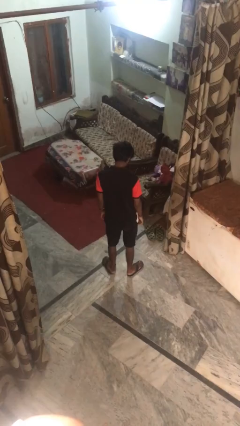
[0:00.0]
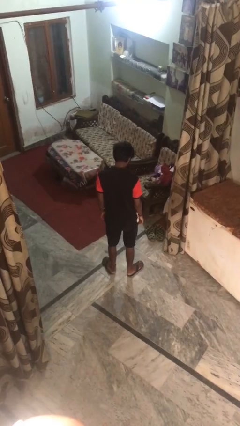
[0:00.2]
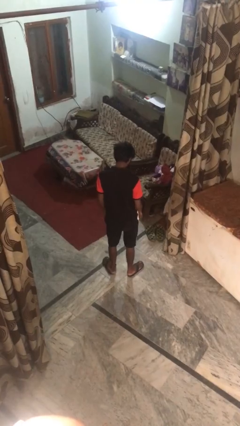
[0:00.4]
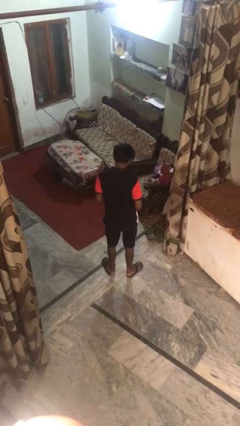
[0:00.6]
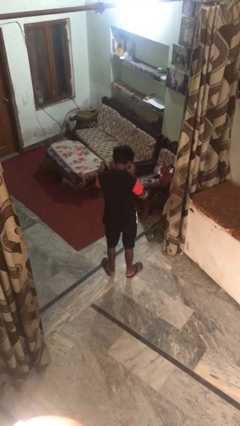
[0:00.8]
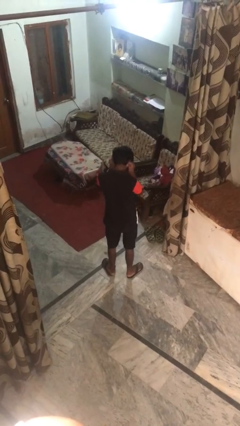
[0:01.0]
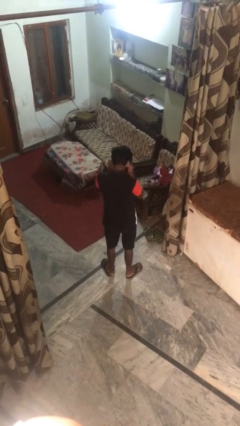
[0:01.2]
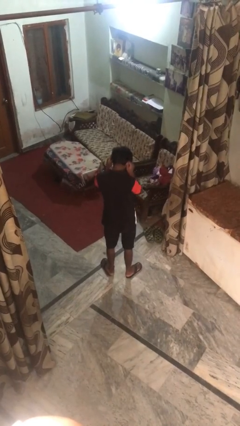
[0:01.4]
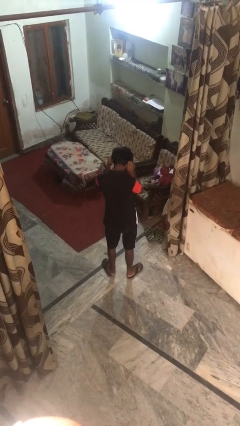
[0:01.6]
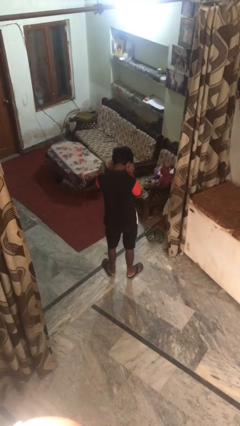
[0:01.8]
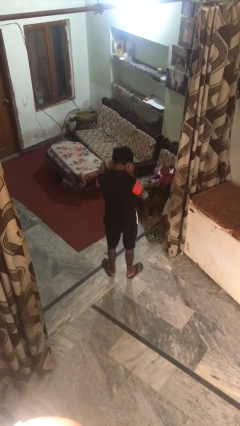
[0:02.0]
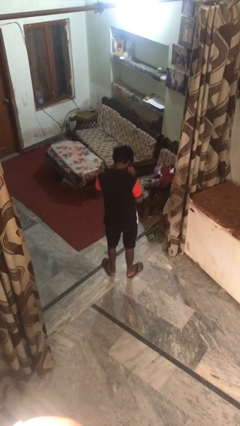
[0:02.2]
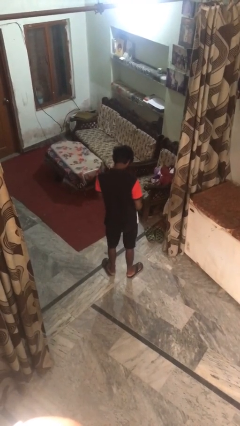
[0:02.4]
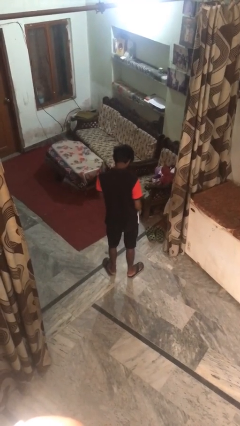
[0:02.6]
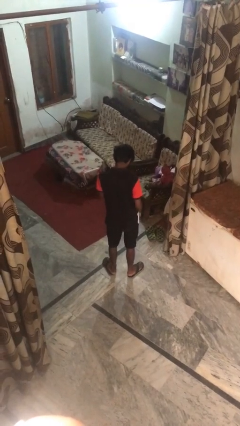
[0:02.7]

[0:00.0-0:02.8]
person touches earlobe

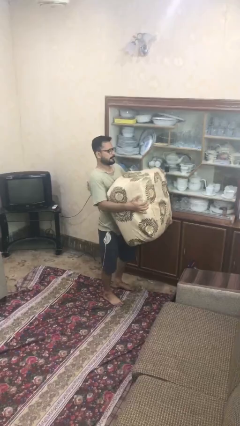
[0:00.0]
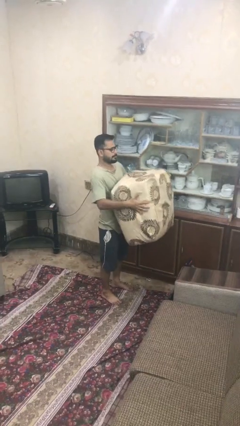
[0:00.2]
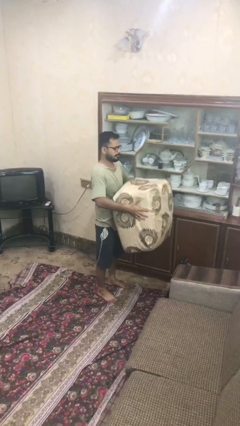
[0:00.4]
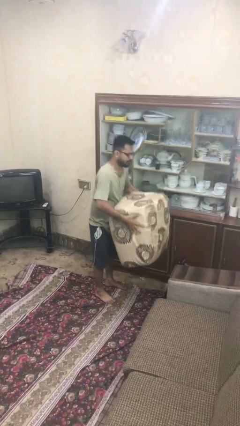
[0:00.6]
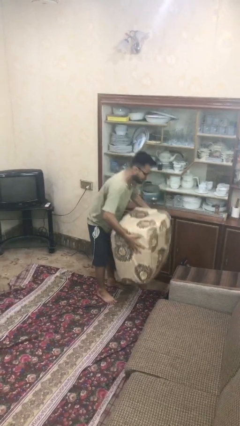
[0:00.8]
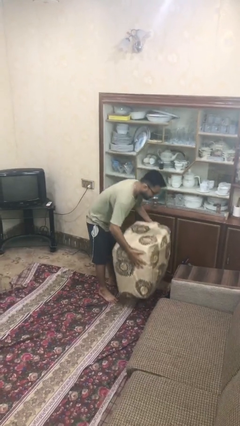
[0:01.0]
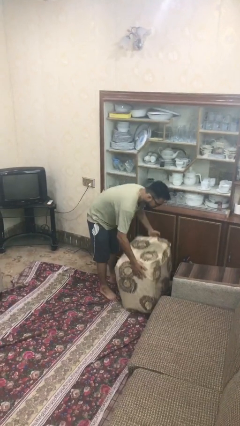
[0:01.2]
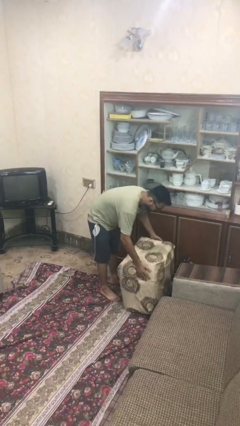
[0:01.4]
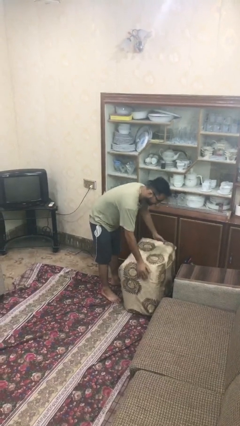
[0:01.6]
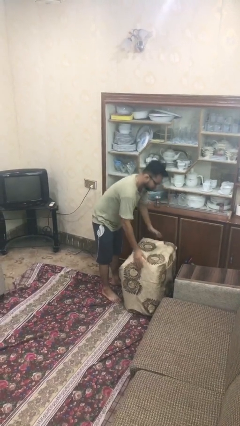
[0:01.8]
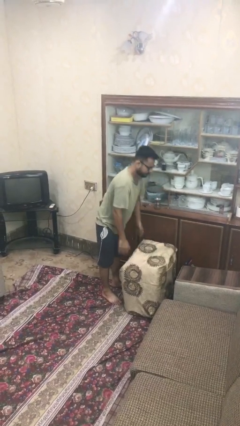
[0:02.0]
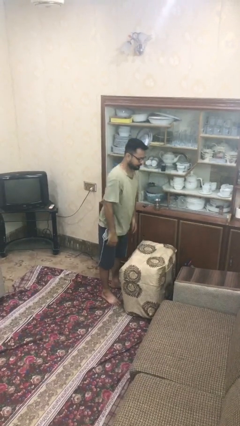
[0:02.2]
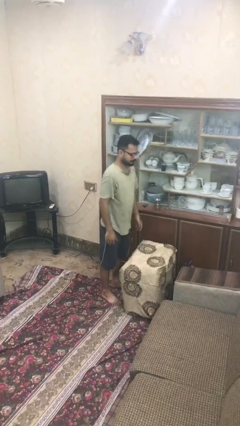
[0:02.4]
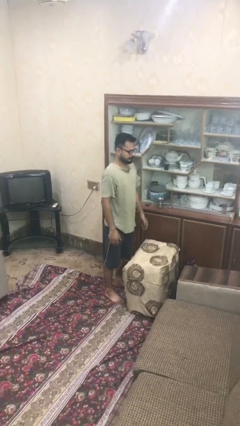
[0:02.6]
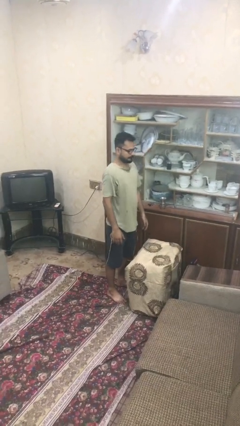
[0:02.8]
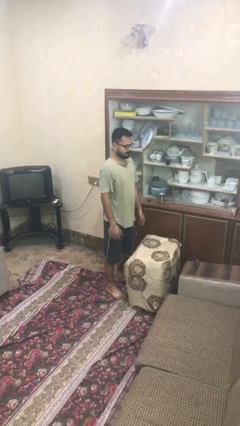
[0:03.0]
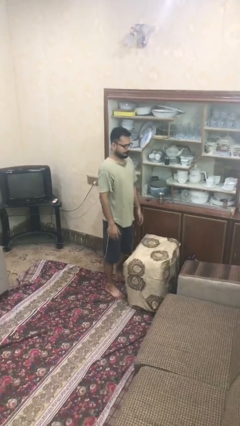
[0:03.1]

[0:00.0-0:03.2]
person puts down object on floor

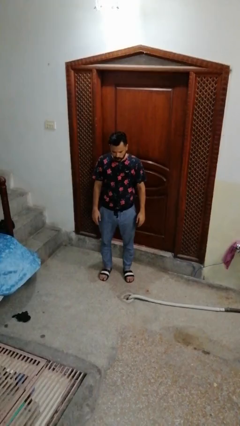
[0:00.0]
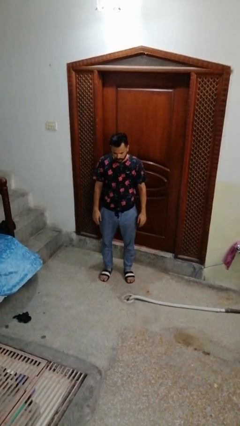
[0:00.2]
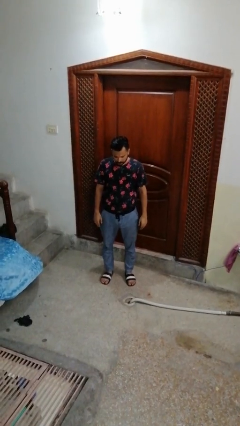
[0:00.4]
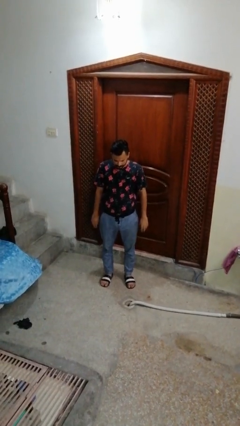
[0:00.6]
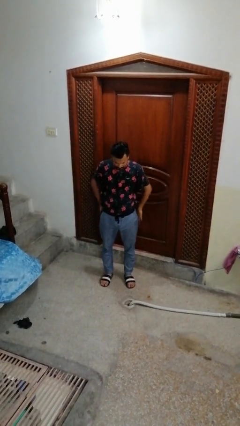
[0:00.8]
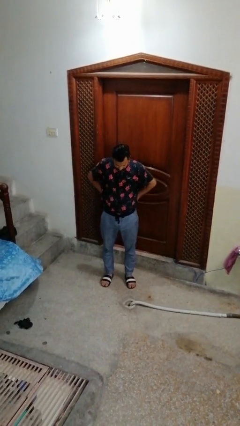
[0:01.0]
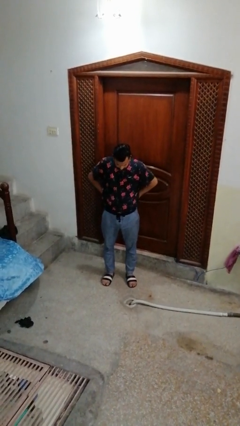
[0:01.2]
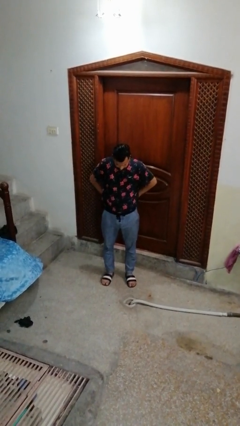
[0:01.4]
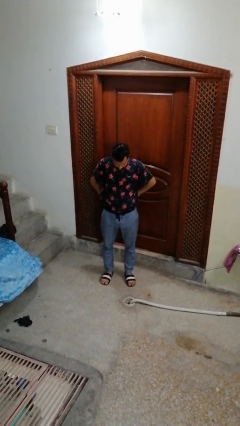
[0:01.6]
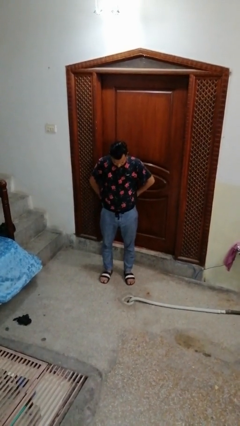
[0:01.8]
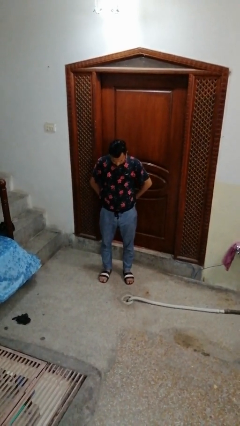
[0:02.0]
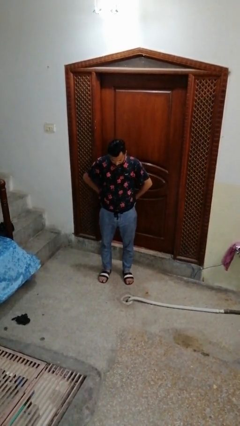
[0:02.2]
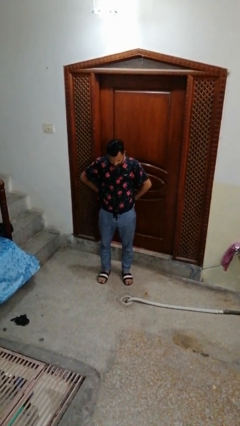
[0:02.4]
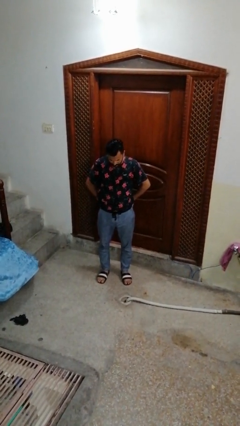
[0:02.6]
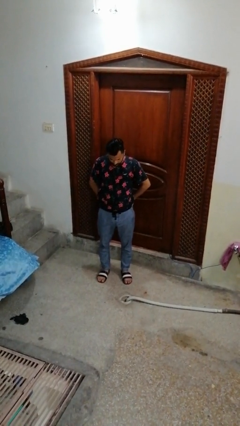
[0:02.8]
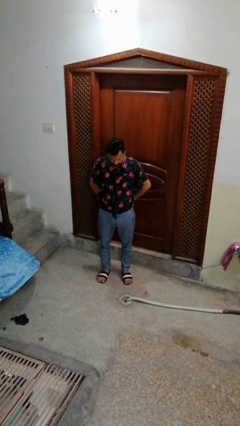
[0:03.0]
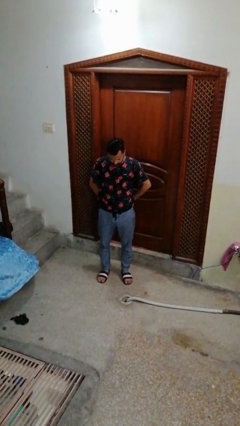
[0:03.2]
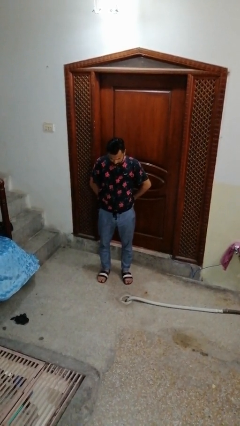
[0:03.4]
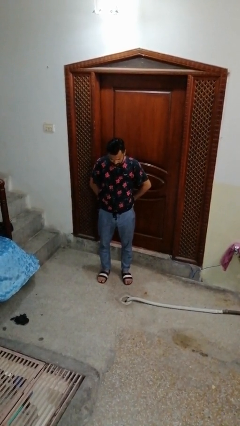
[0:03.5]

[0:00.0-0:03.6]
person puts hands in back pockets

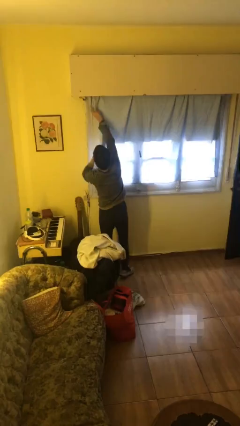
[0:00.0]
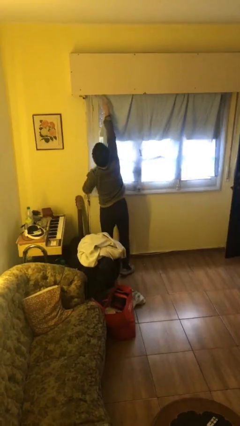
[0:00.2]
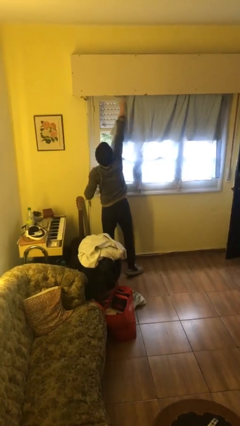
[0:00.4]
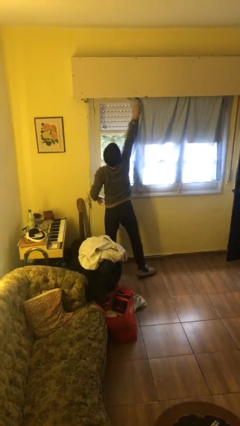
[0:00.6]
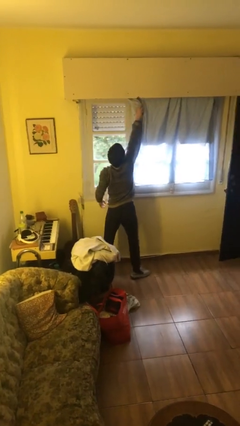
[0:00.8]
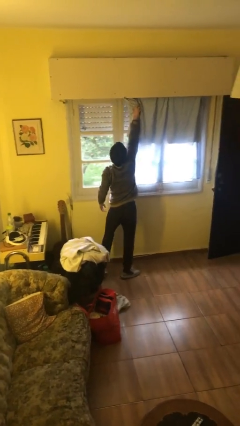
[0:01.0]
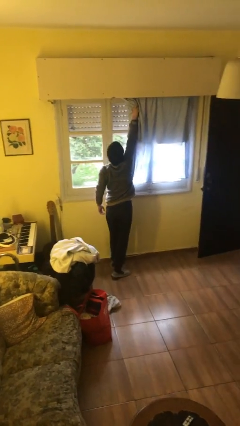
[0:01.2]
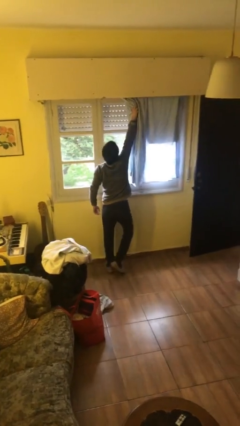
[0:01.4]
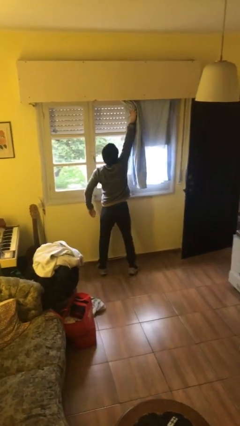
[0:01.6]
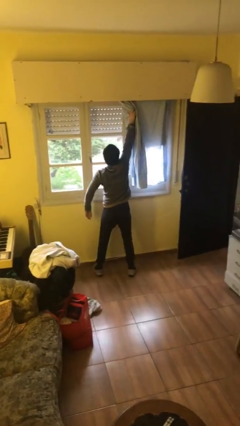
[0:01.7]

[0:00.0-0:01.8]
person opens curtains

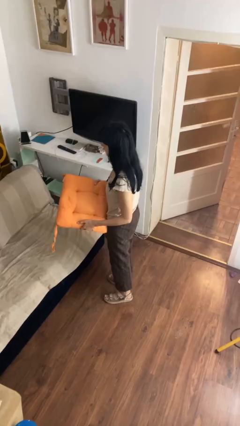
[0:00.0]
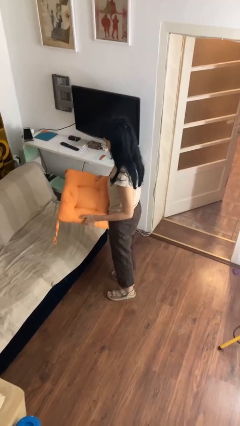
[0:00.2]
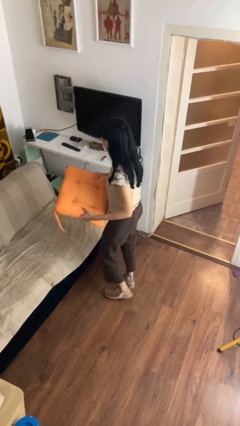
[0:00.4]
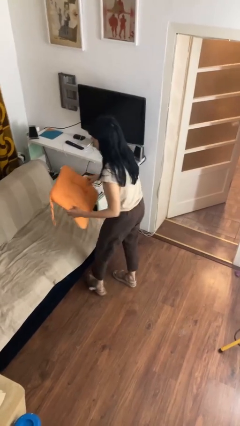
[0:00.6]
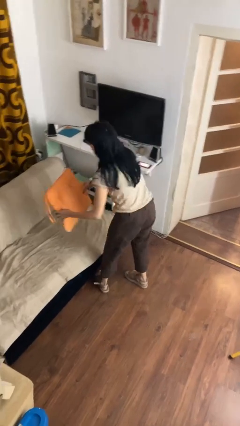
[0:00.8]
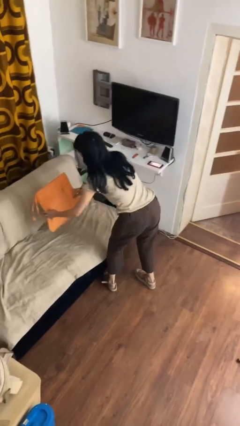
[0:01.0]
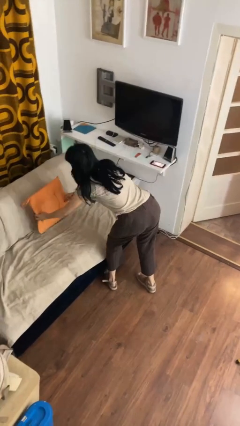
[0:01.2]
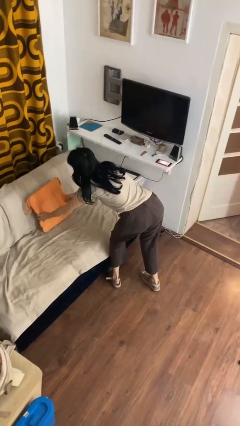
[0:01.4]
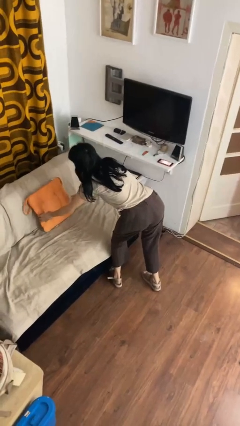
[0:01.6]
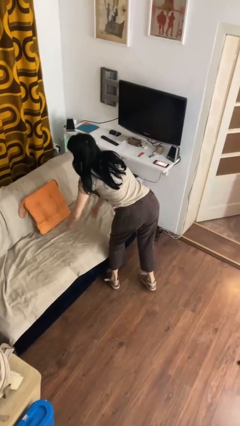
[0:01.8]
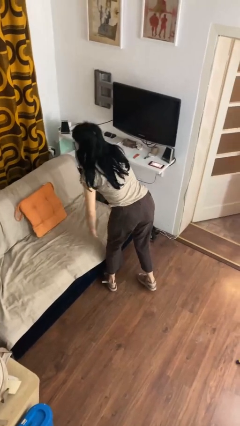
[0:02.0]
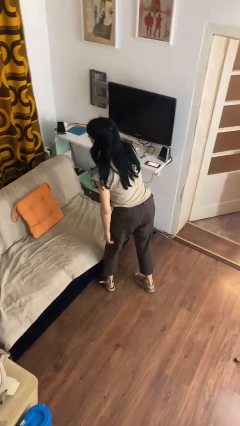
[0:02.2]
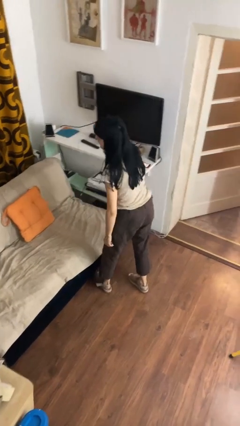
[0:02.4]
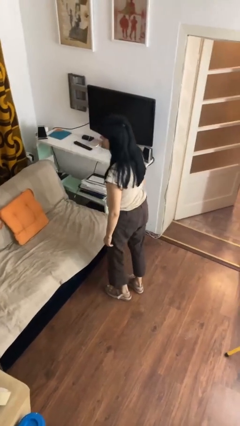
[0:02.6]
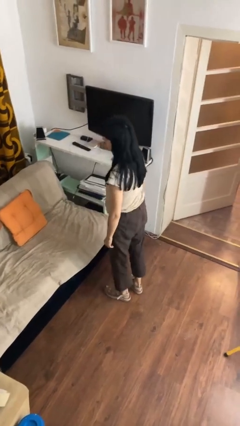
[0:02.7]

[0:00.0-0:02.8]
person puts down object on couch

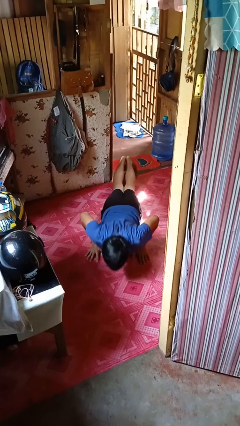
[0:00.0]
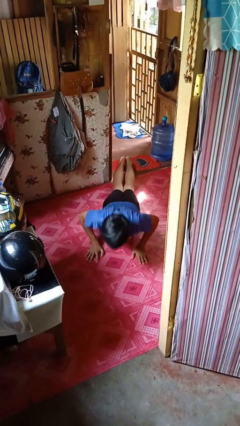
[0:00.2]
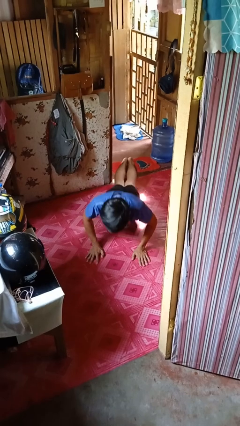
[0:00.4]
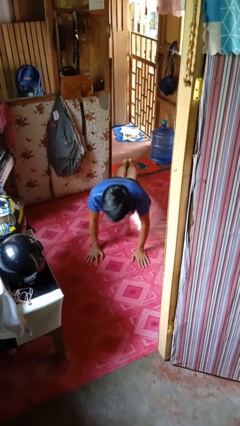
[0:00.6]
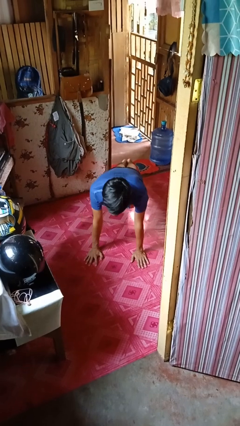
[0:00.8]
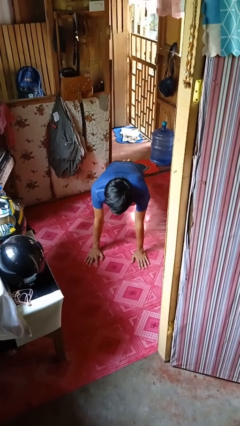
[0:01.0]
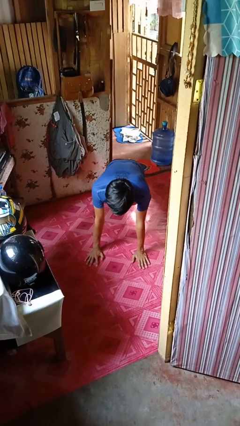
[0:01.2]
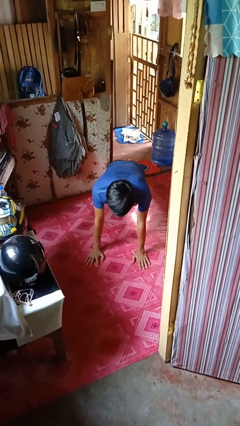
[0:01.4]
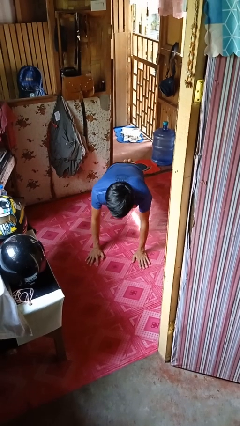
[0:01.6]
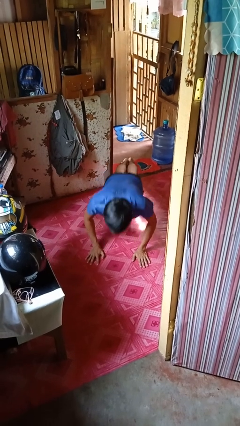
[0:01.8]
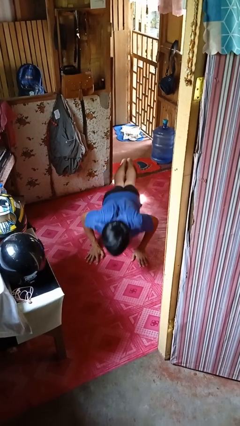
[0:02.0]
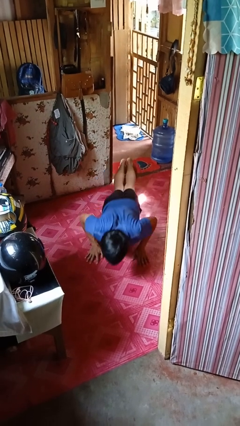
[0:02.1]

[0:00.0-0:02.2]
person exercises with pushup

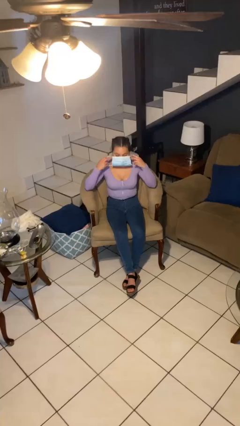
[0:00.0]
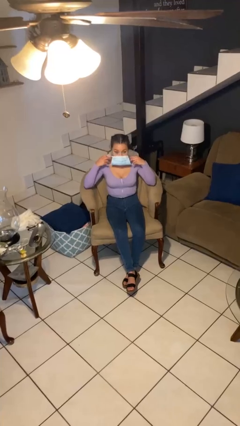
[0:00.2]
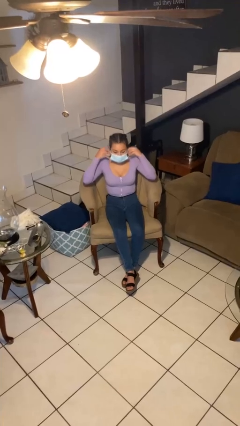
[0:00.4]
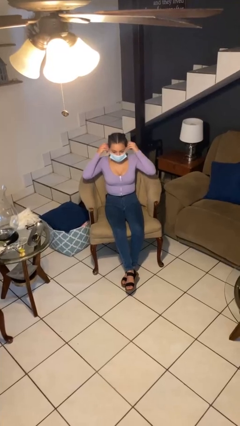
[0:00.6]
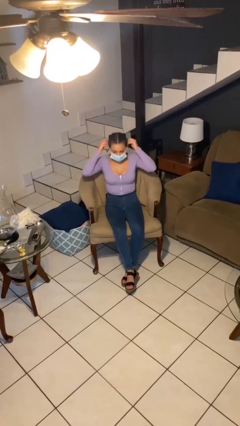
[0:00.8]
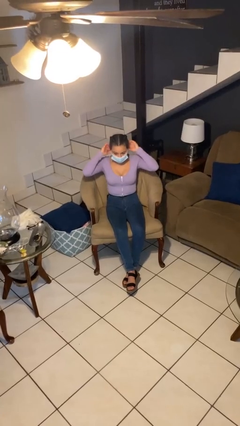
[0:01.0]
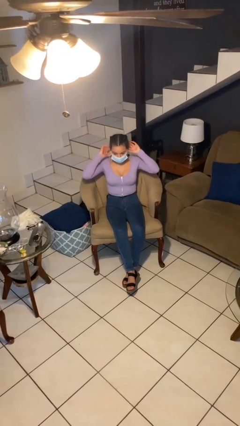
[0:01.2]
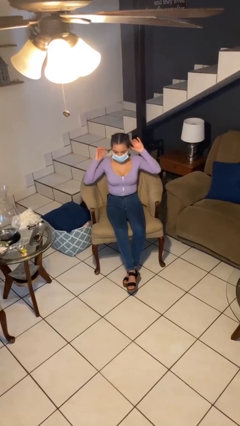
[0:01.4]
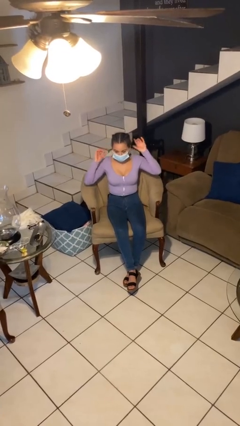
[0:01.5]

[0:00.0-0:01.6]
person puts on facemask
